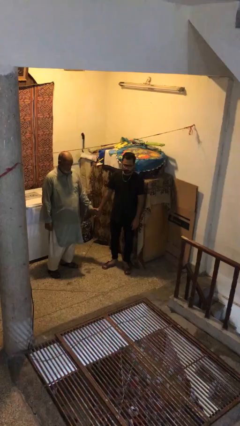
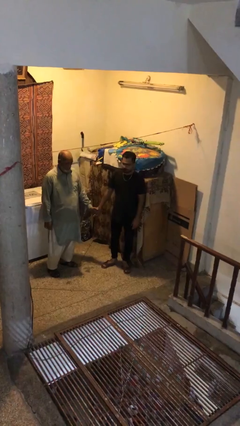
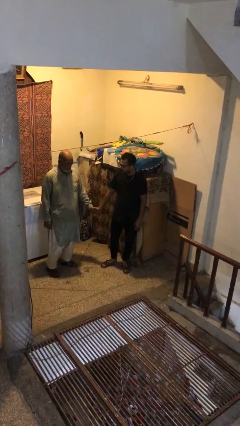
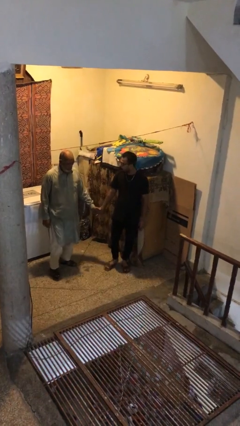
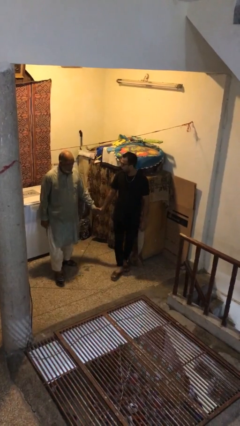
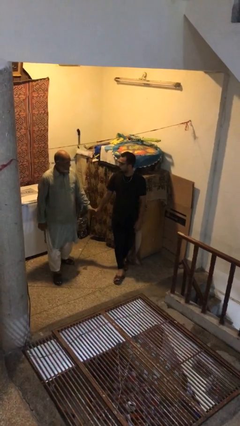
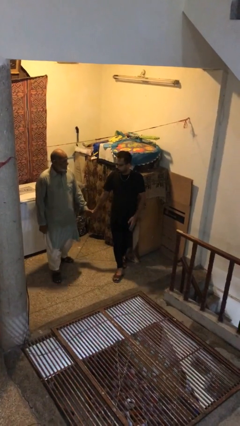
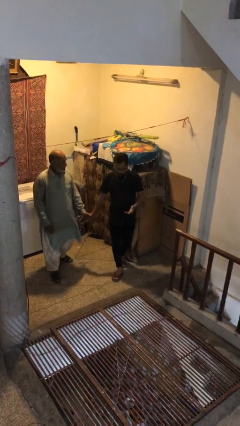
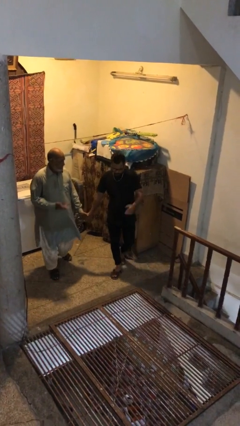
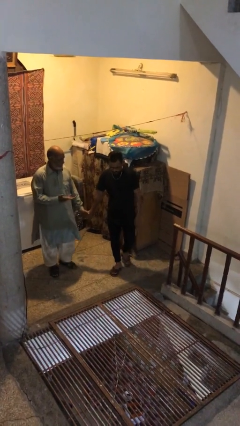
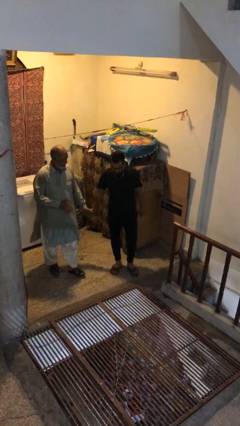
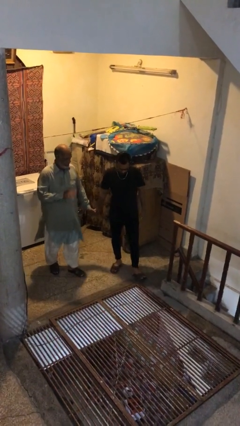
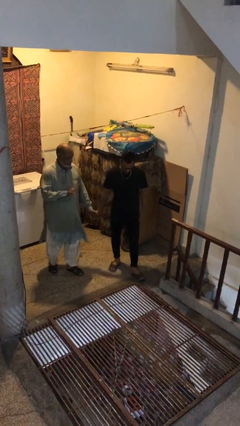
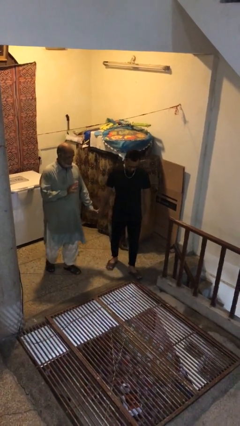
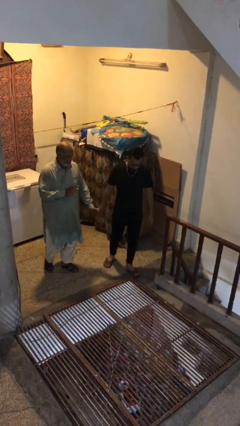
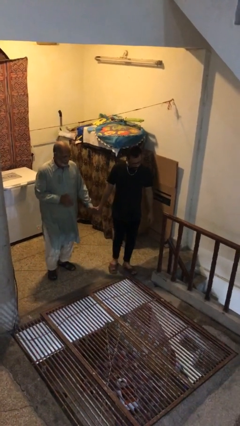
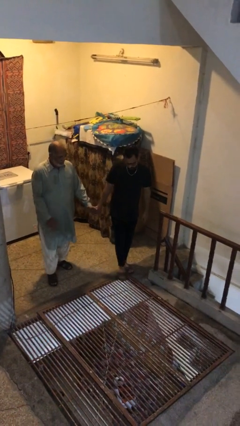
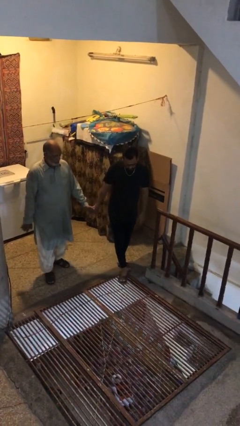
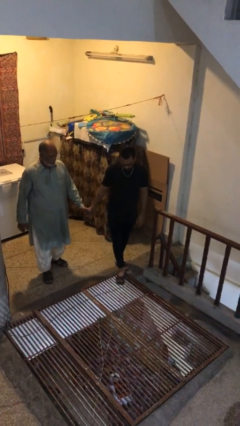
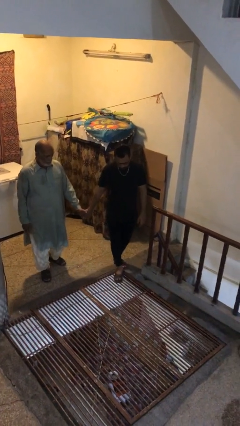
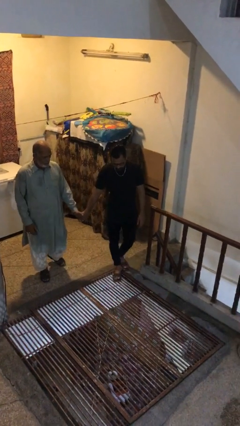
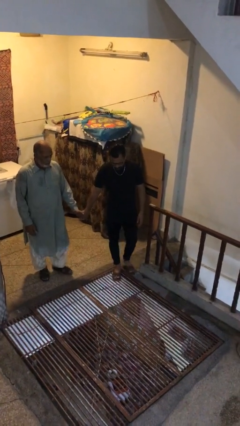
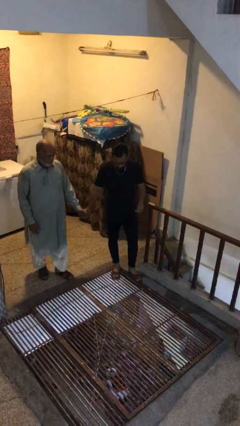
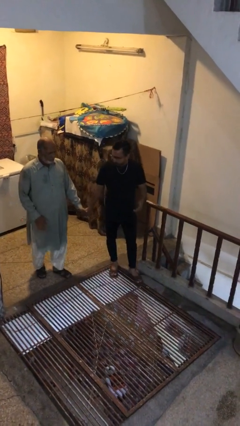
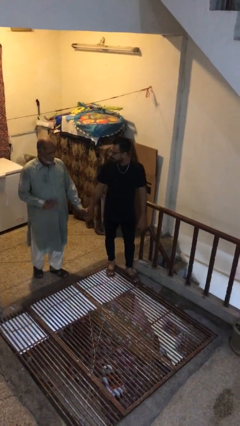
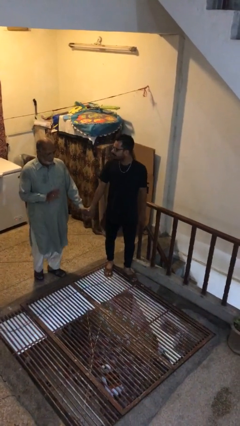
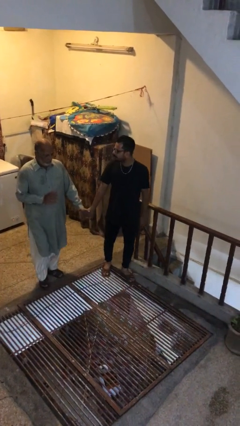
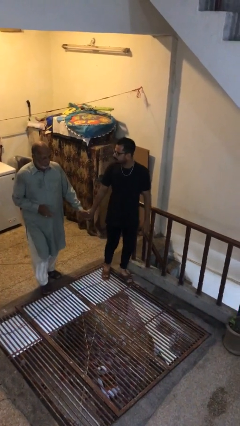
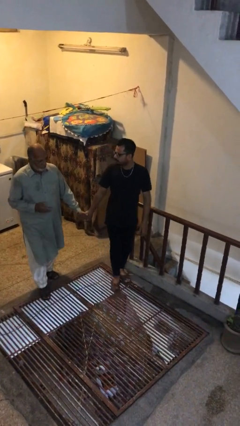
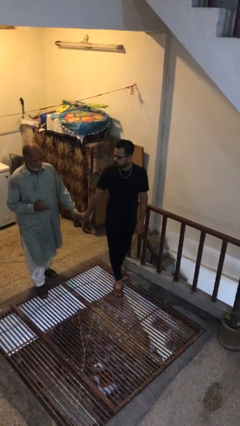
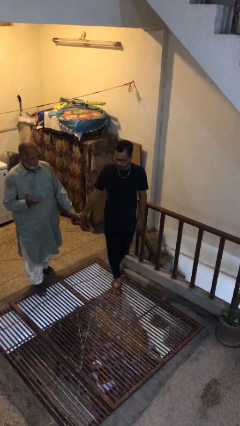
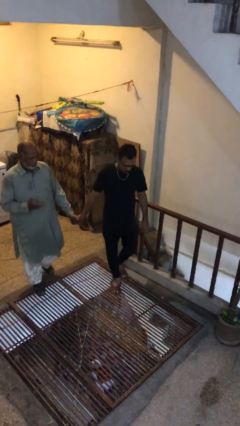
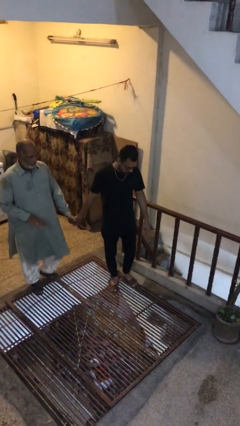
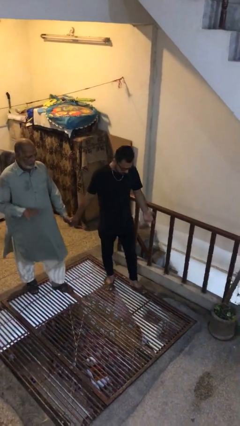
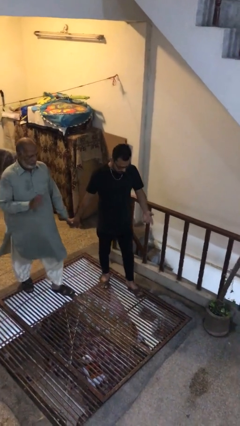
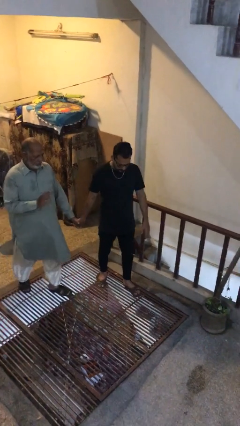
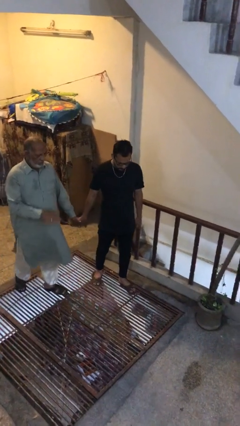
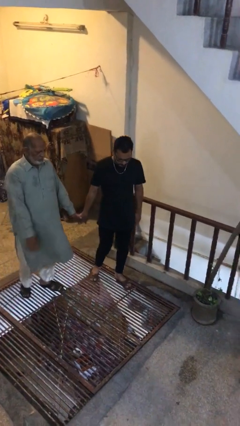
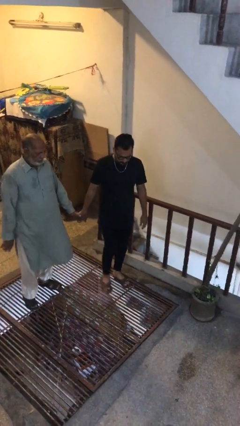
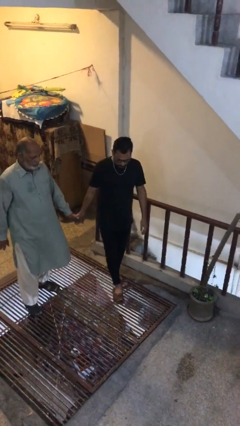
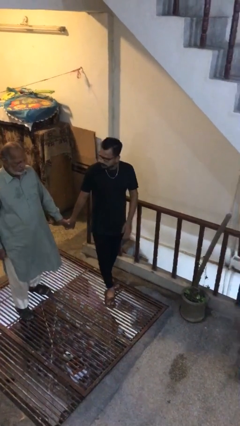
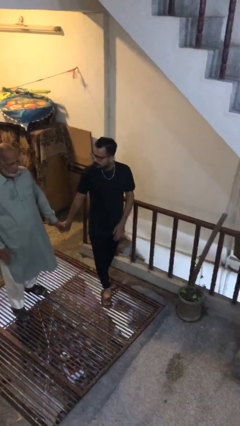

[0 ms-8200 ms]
person holds hand

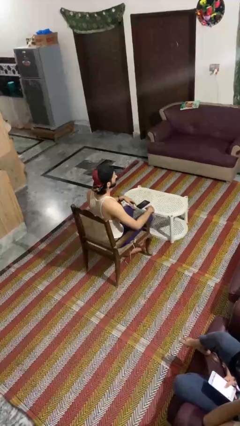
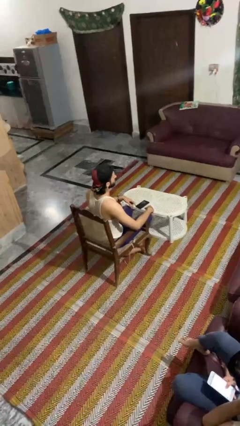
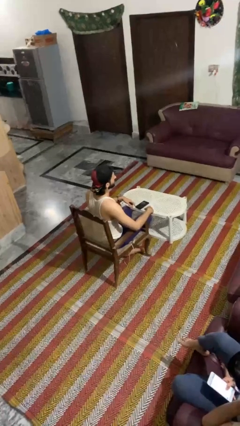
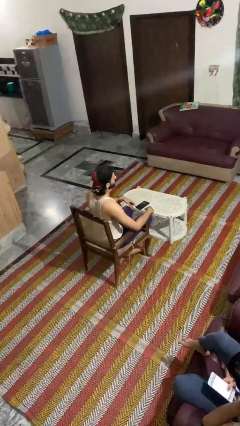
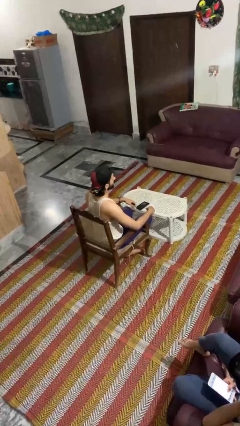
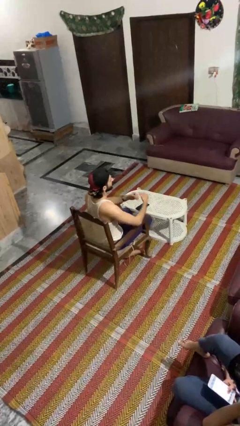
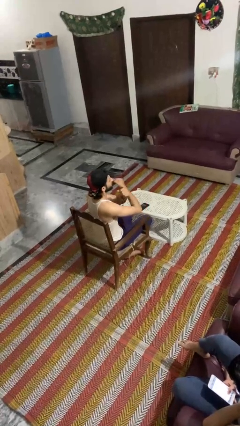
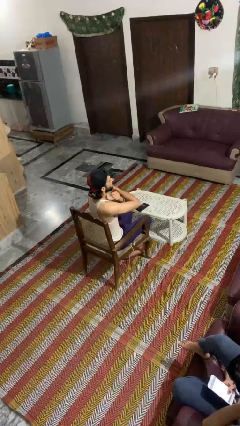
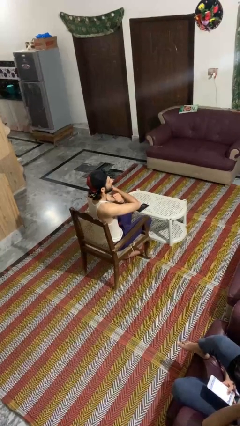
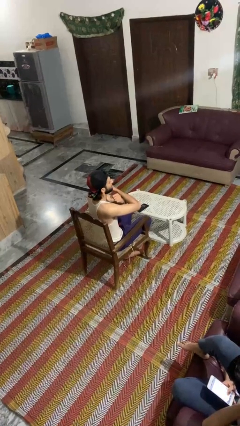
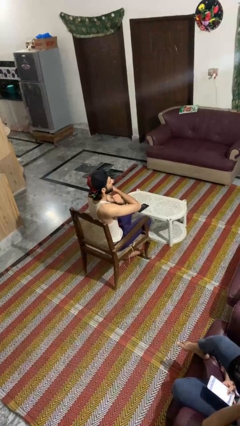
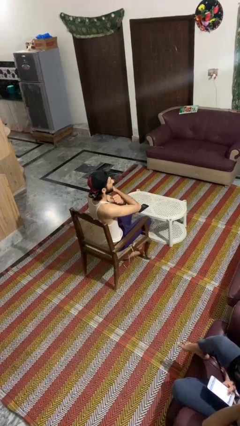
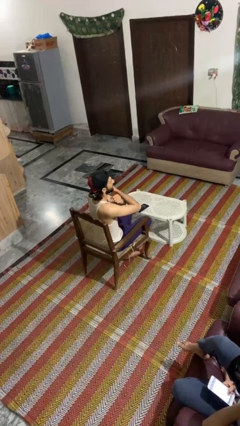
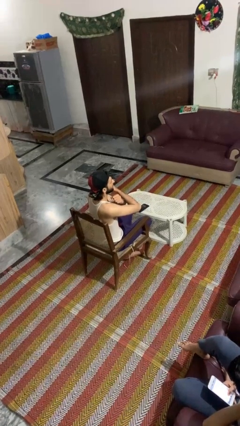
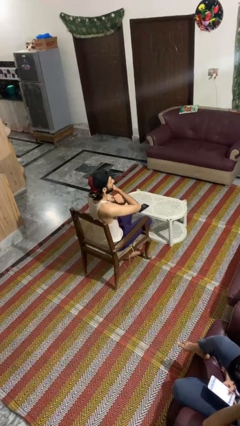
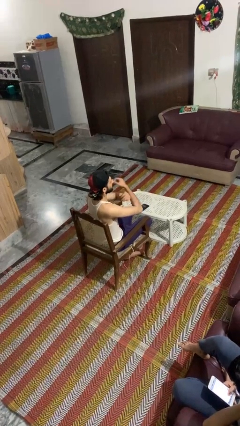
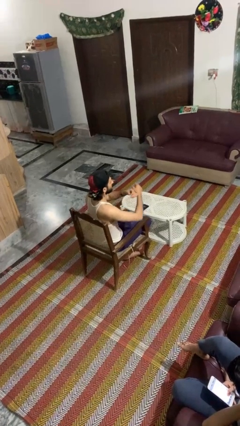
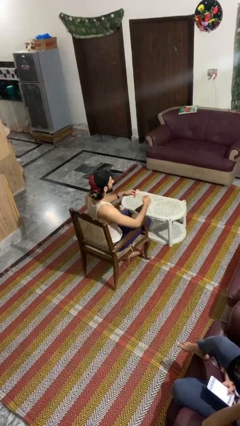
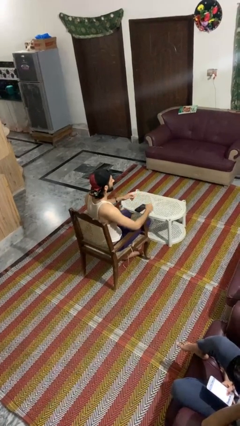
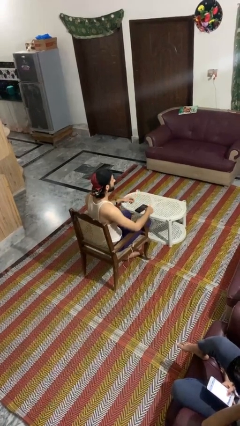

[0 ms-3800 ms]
person gestures arms x

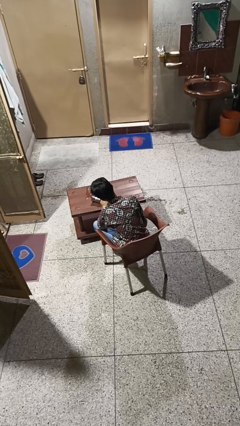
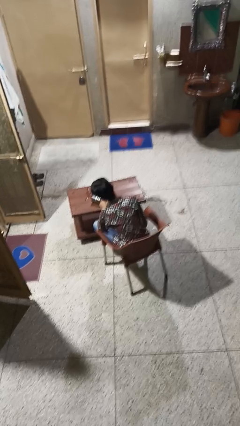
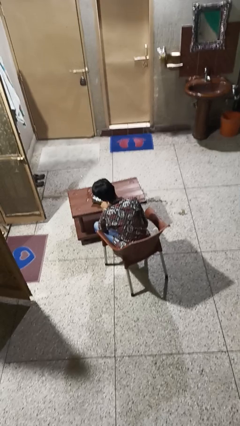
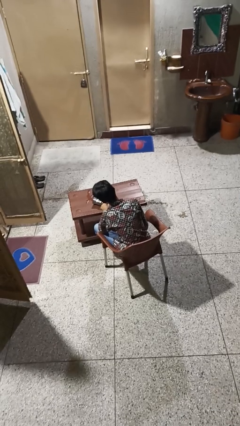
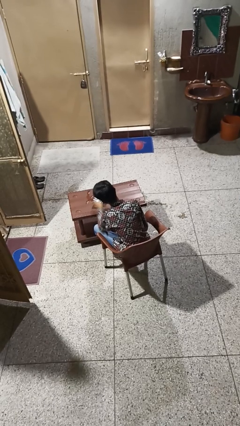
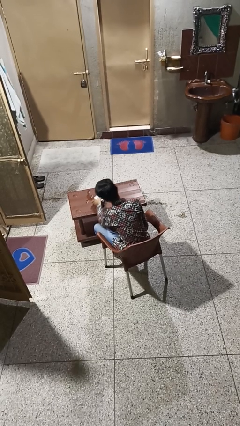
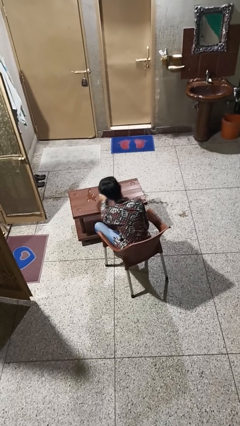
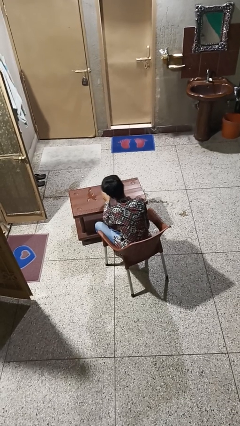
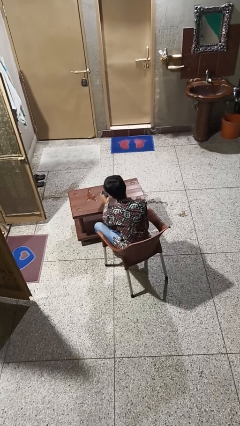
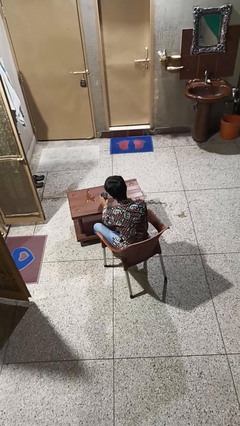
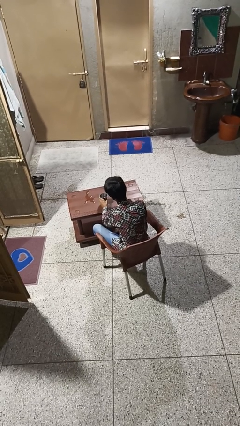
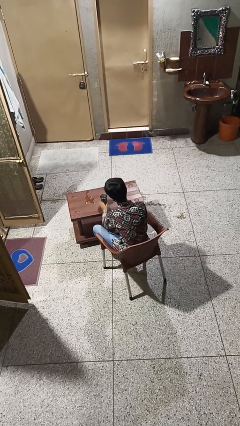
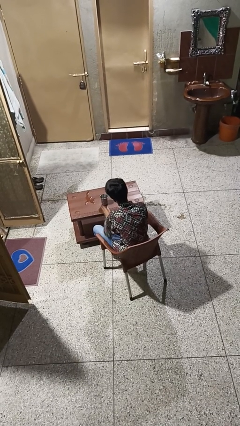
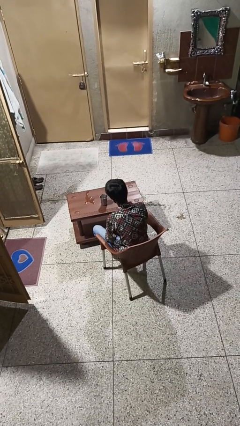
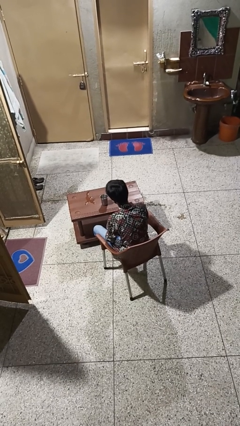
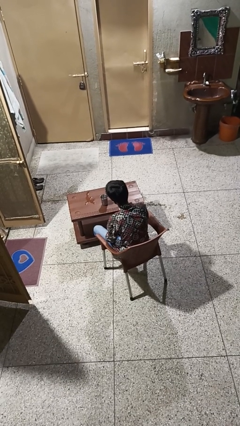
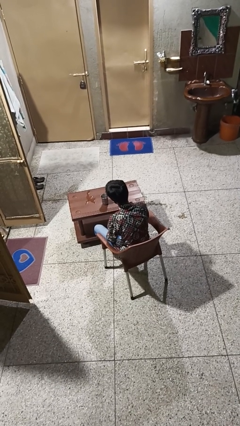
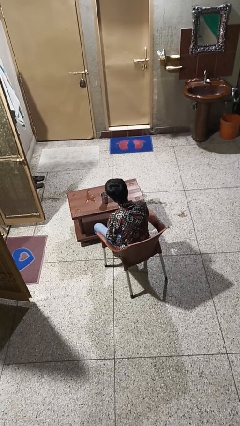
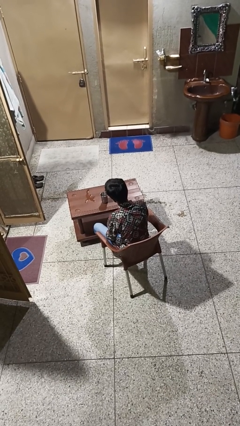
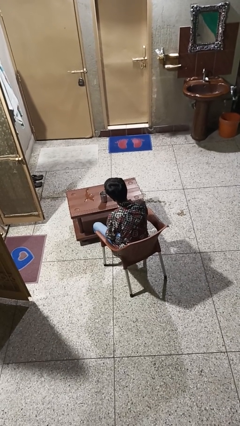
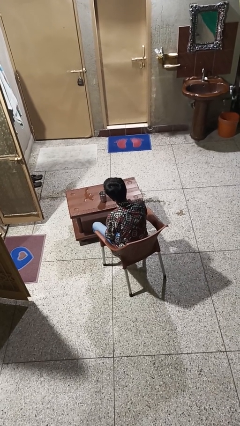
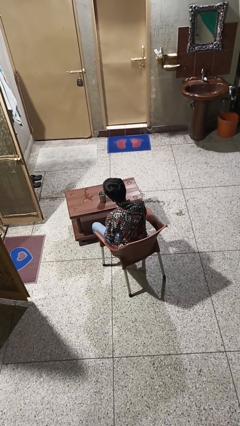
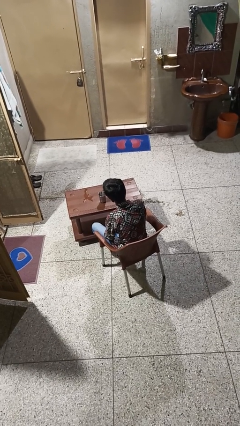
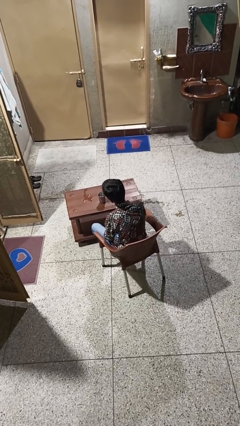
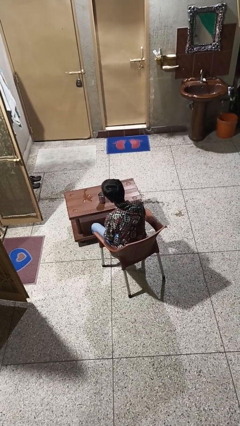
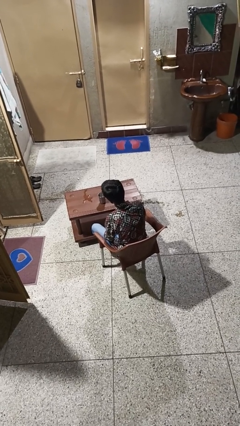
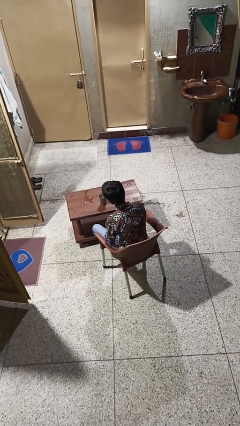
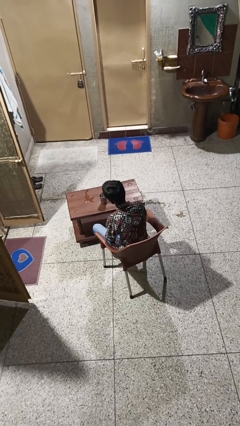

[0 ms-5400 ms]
person sets upright glass
